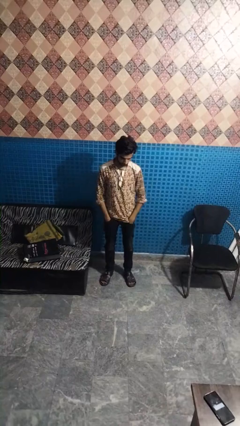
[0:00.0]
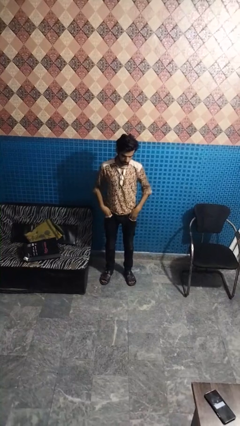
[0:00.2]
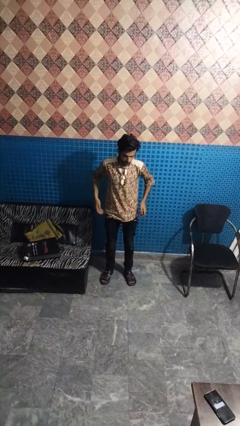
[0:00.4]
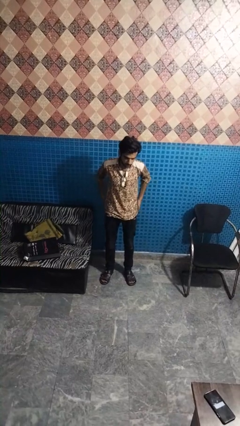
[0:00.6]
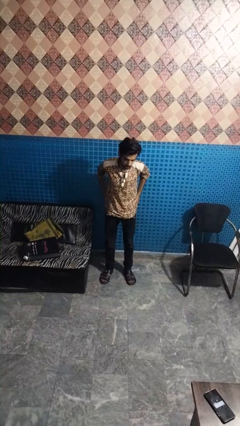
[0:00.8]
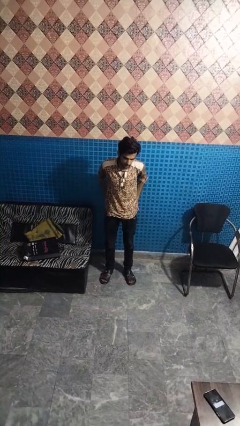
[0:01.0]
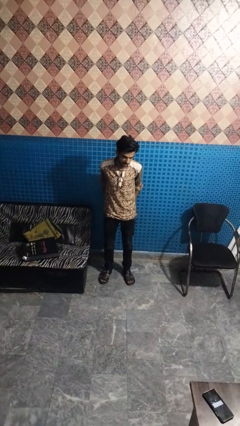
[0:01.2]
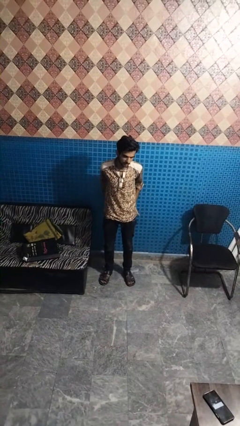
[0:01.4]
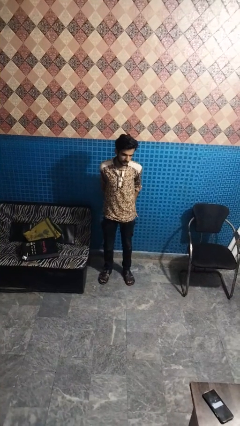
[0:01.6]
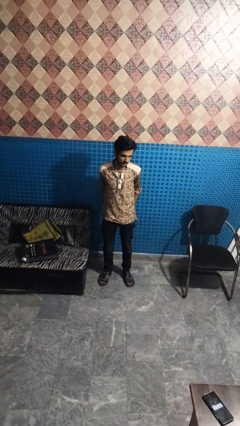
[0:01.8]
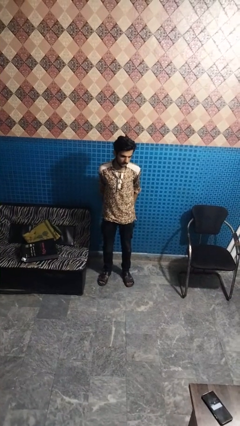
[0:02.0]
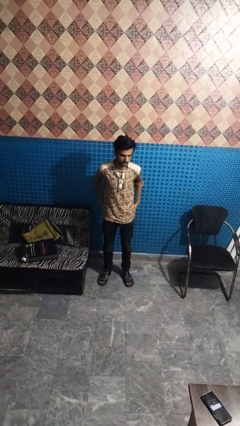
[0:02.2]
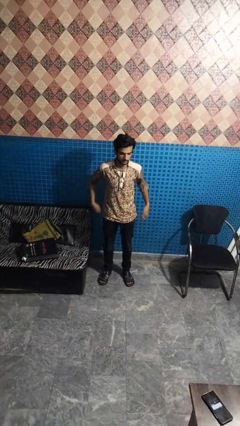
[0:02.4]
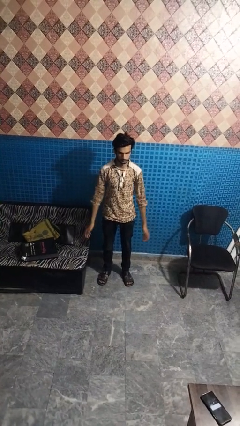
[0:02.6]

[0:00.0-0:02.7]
person puts hands in back pockets

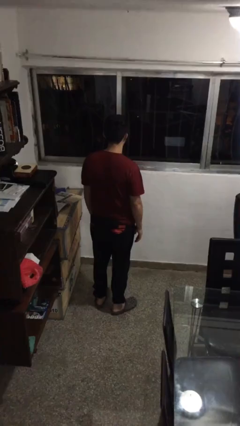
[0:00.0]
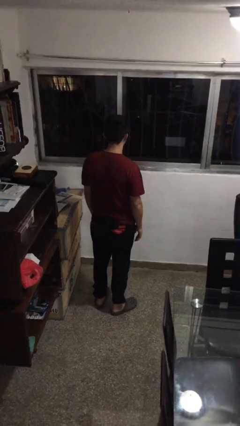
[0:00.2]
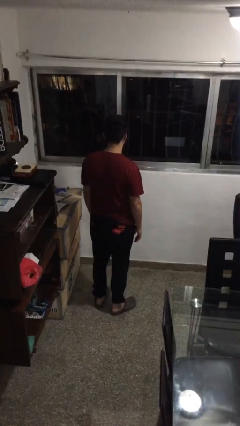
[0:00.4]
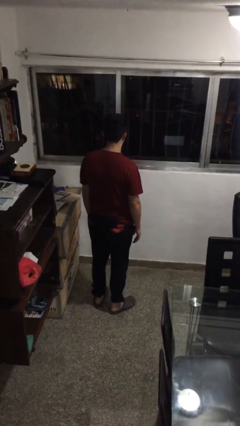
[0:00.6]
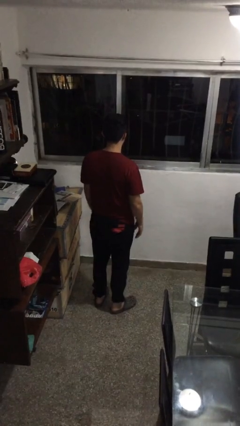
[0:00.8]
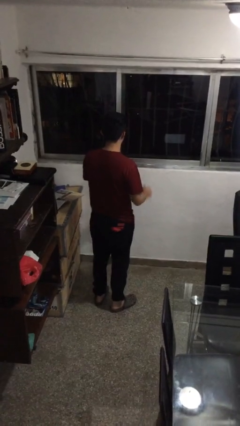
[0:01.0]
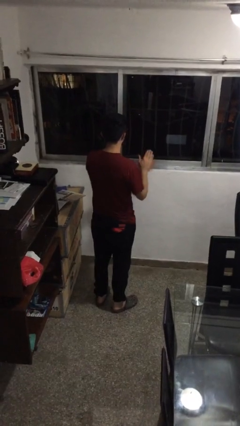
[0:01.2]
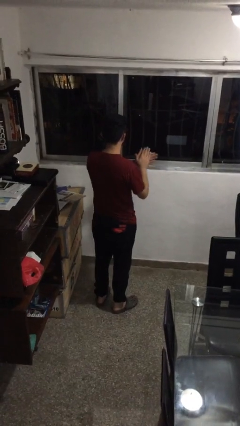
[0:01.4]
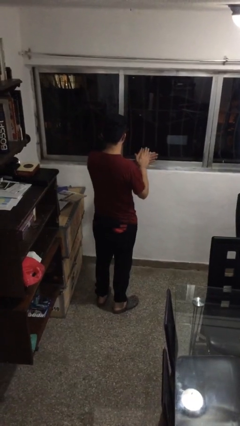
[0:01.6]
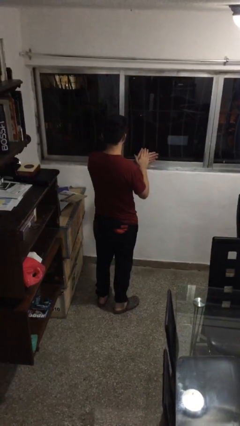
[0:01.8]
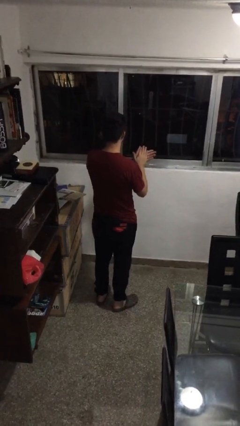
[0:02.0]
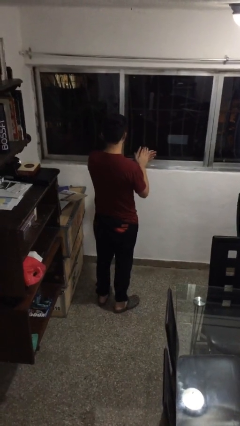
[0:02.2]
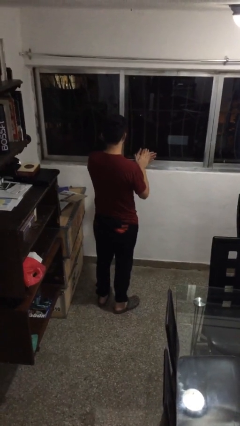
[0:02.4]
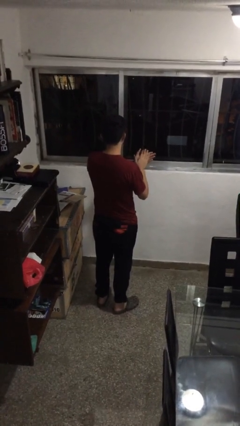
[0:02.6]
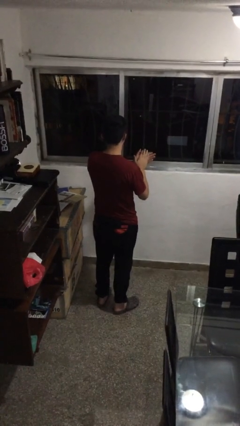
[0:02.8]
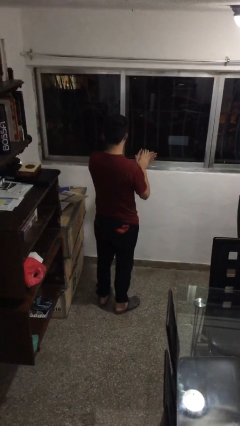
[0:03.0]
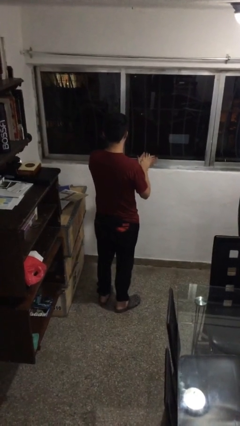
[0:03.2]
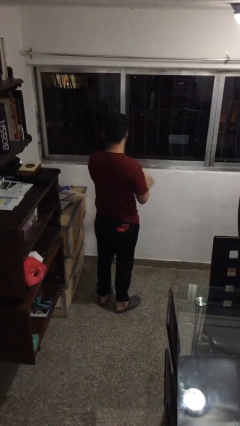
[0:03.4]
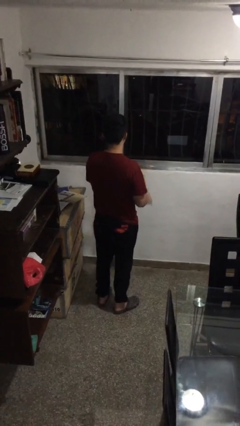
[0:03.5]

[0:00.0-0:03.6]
person claps hands

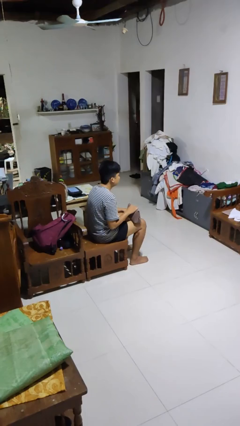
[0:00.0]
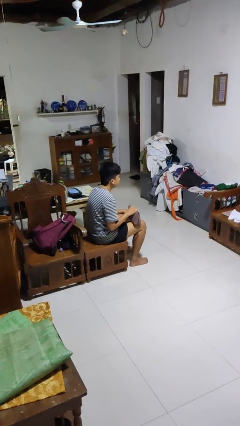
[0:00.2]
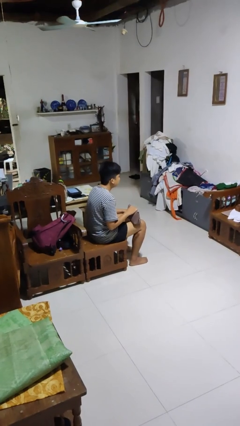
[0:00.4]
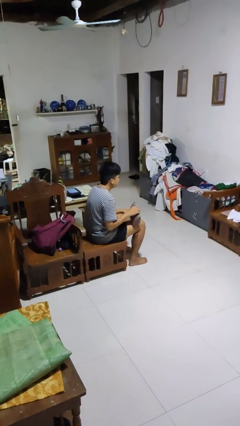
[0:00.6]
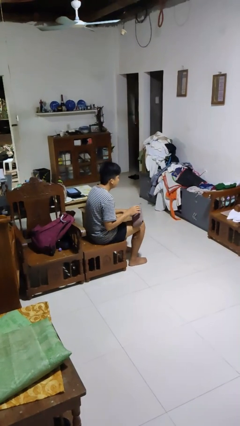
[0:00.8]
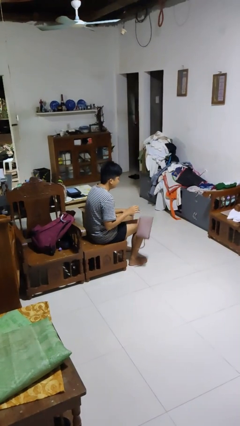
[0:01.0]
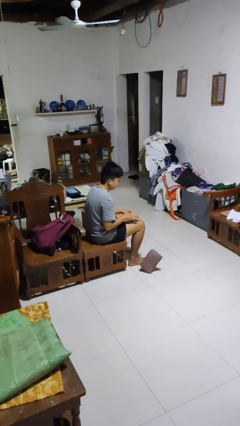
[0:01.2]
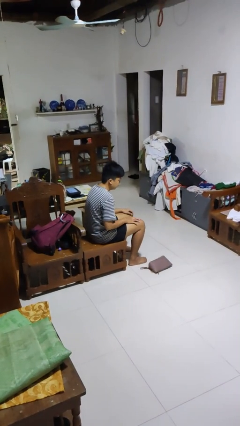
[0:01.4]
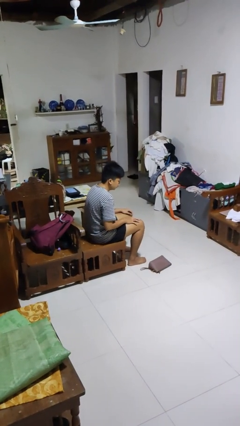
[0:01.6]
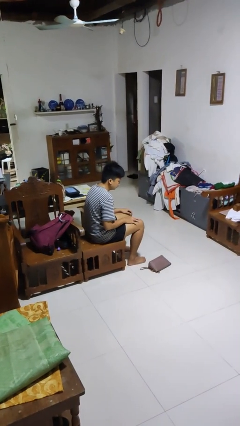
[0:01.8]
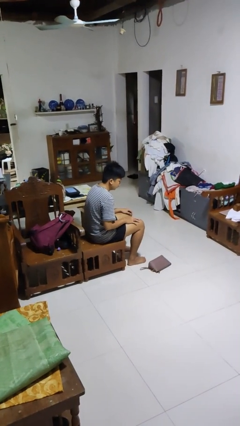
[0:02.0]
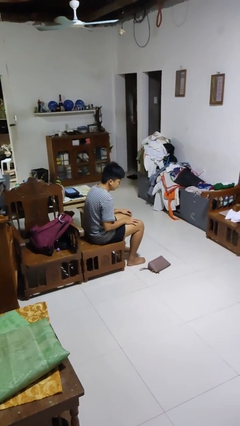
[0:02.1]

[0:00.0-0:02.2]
person drops object

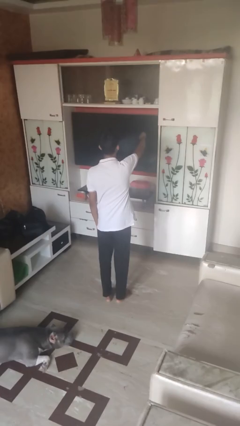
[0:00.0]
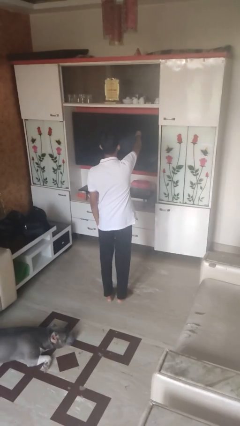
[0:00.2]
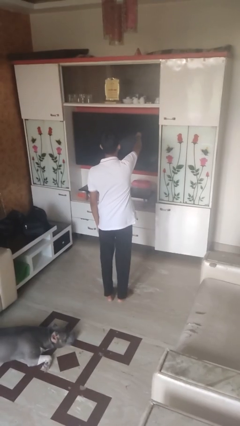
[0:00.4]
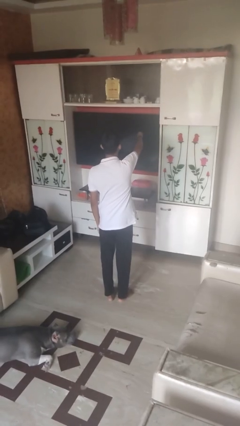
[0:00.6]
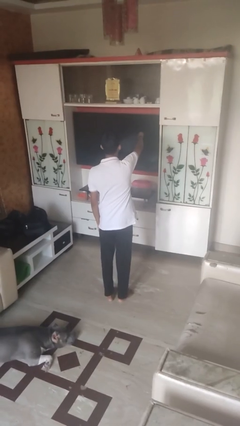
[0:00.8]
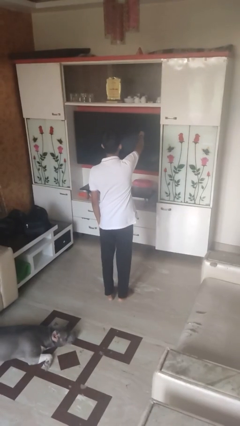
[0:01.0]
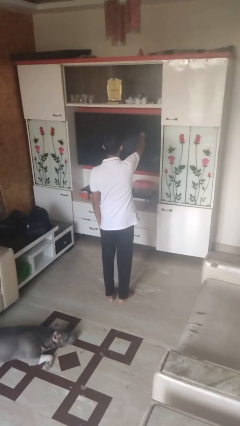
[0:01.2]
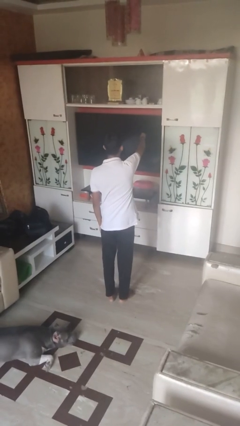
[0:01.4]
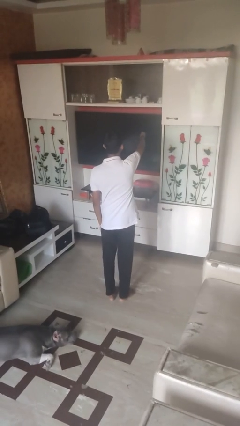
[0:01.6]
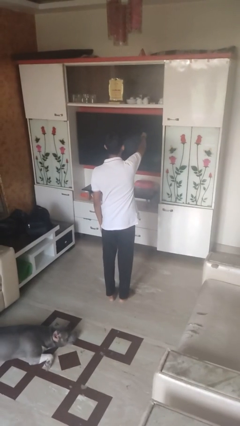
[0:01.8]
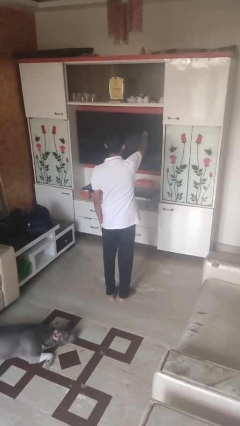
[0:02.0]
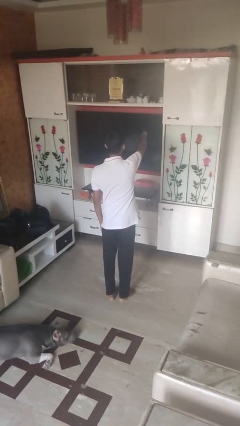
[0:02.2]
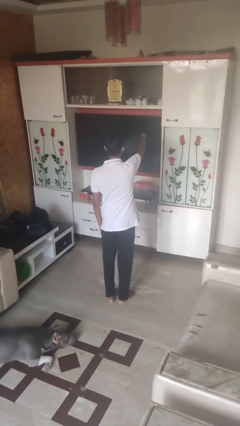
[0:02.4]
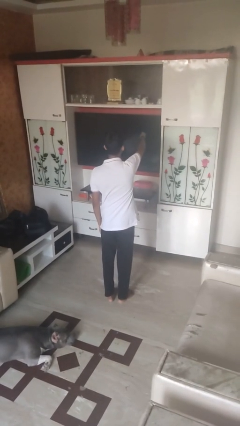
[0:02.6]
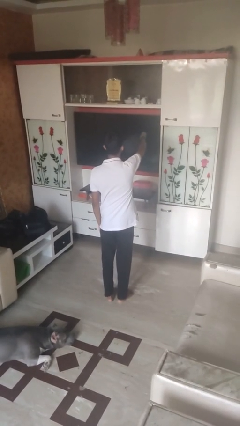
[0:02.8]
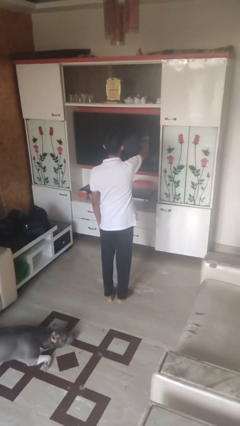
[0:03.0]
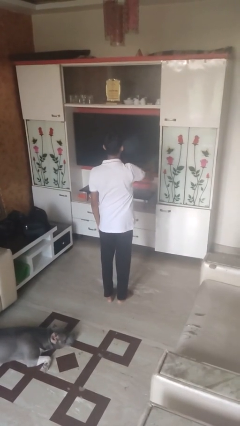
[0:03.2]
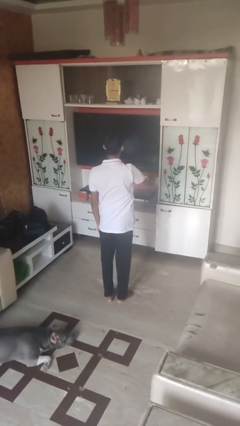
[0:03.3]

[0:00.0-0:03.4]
person gestures thumbs down

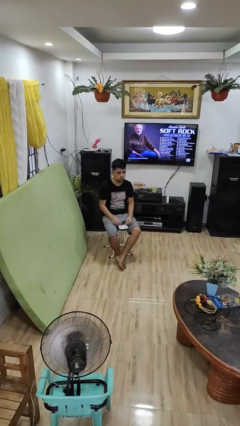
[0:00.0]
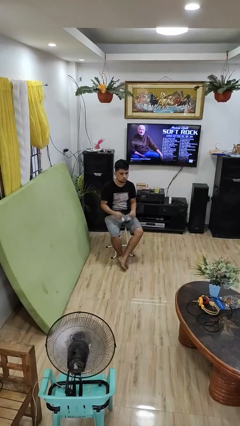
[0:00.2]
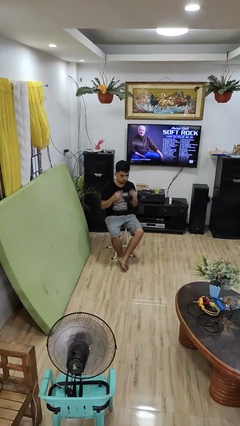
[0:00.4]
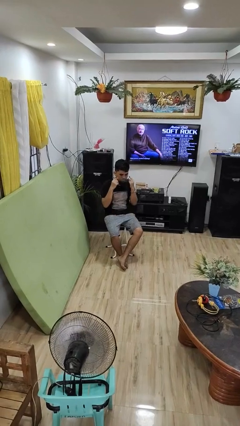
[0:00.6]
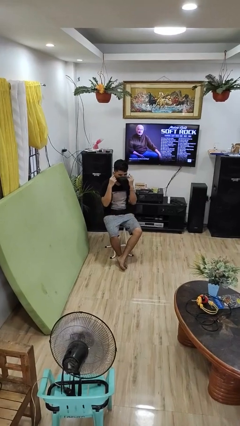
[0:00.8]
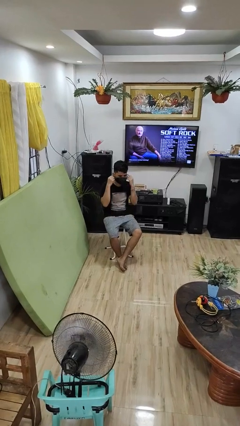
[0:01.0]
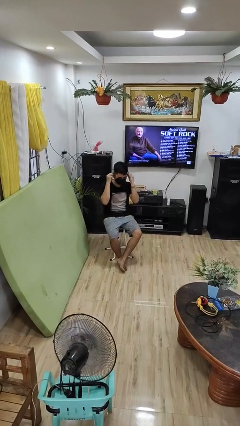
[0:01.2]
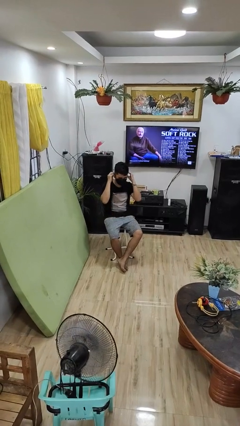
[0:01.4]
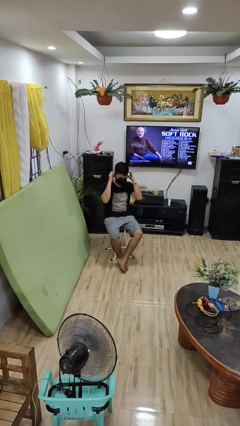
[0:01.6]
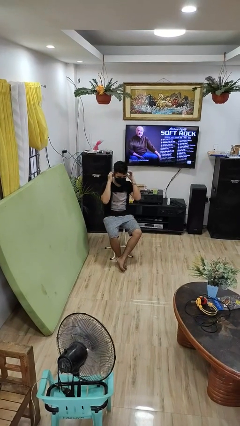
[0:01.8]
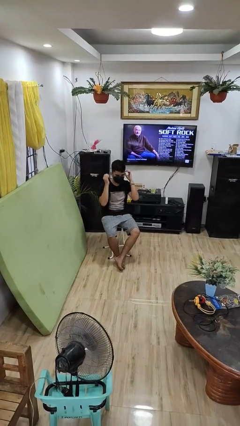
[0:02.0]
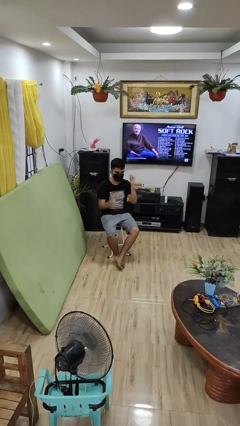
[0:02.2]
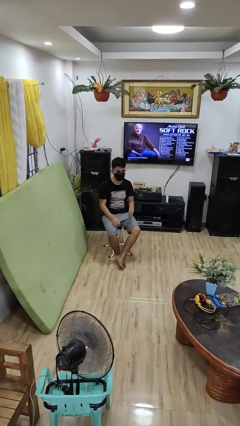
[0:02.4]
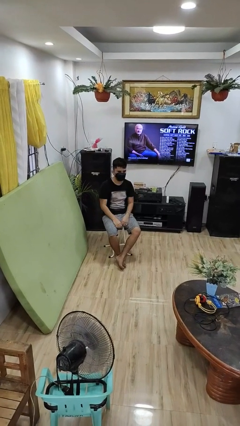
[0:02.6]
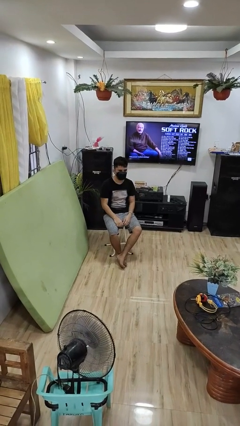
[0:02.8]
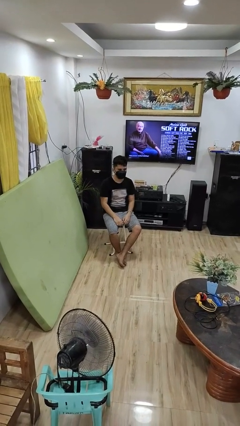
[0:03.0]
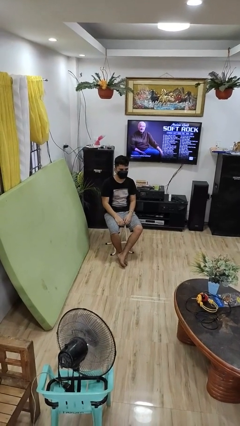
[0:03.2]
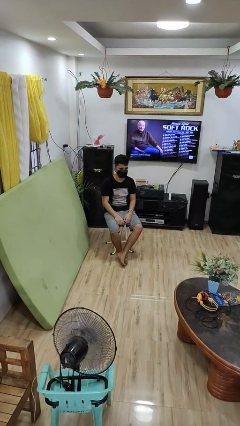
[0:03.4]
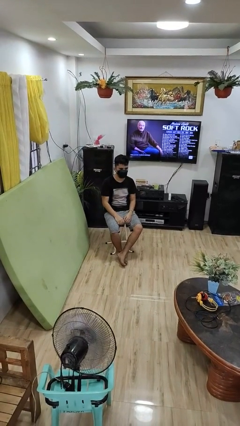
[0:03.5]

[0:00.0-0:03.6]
person puts on facemask

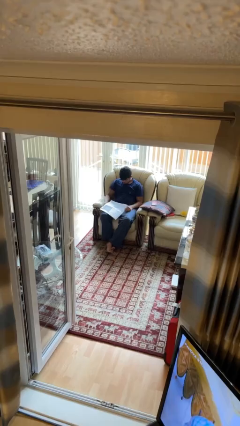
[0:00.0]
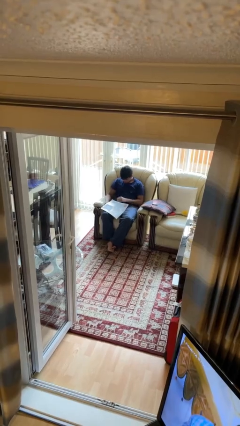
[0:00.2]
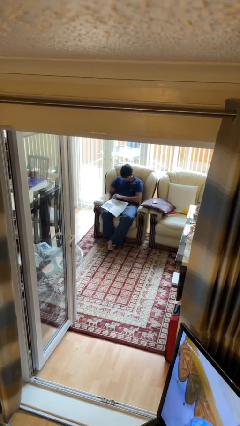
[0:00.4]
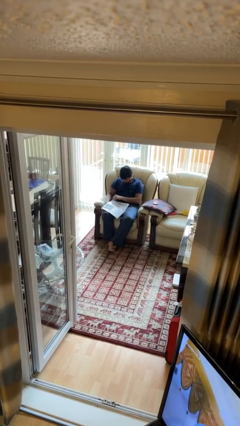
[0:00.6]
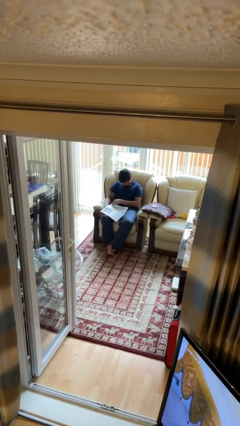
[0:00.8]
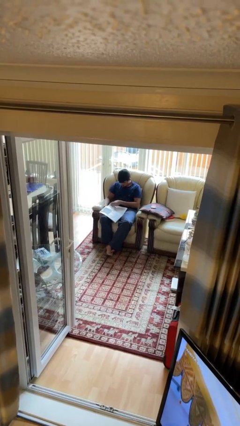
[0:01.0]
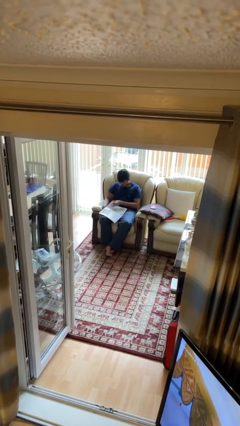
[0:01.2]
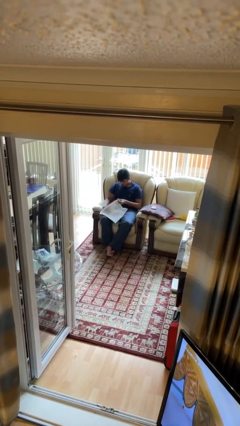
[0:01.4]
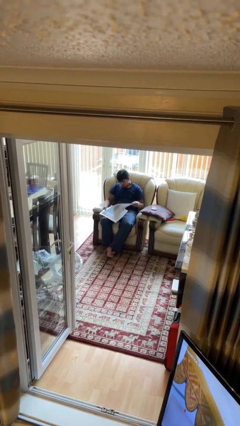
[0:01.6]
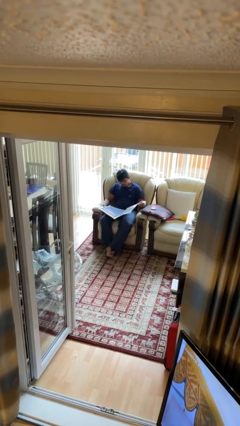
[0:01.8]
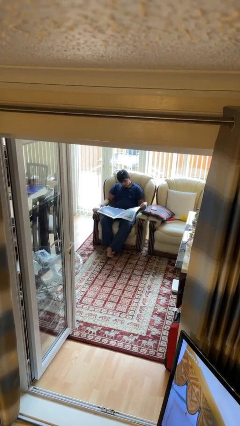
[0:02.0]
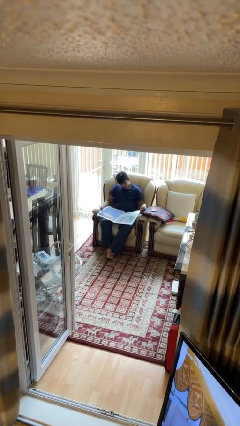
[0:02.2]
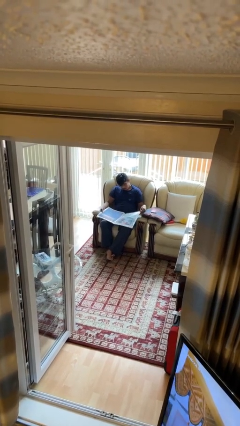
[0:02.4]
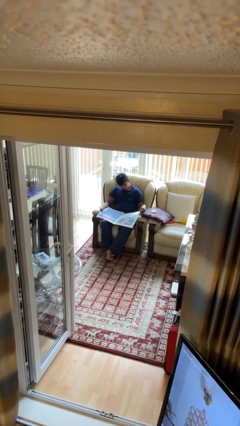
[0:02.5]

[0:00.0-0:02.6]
person reads newspaper
